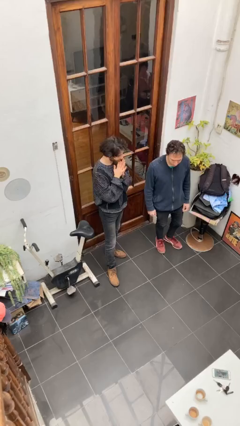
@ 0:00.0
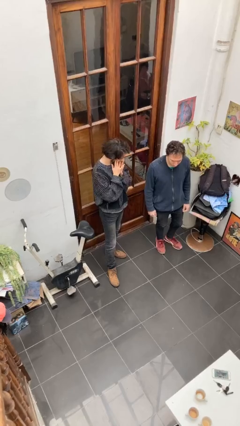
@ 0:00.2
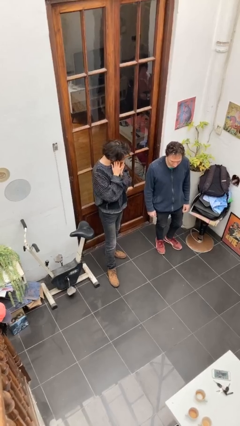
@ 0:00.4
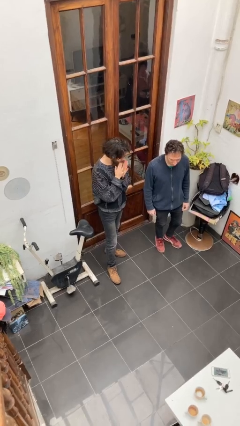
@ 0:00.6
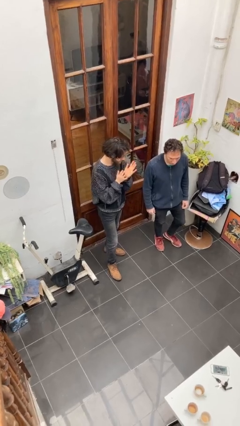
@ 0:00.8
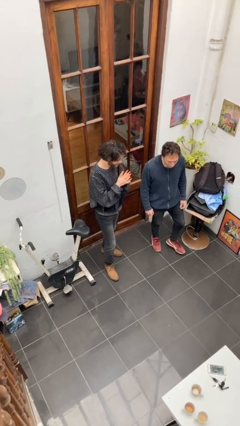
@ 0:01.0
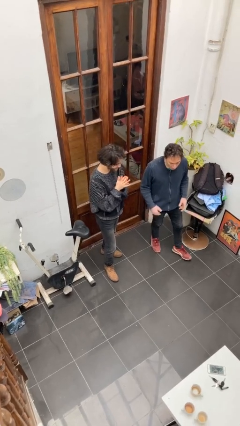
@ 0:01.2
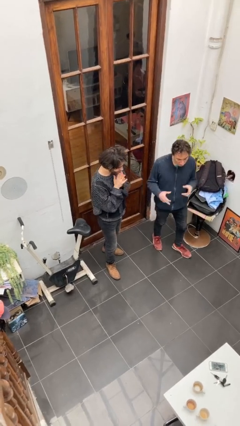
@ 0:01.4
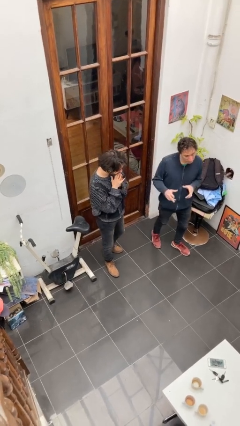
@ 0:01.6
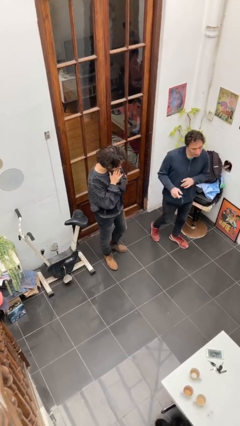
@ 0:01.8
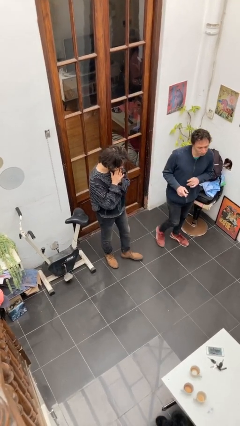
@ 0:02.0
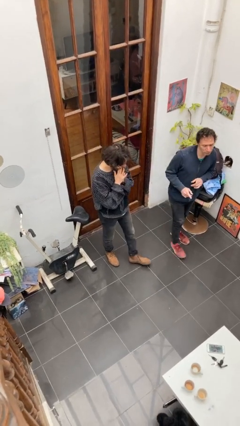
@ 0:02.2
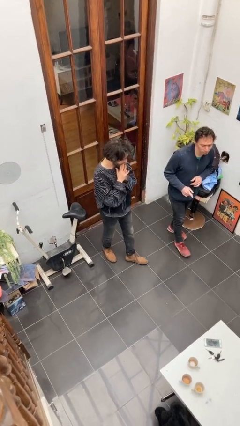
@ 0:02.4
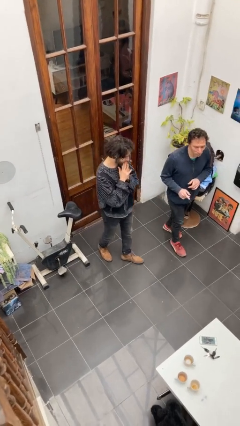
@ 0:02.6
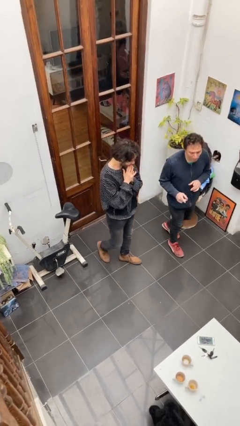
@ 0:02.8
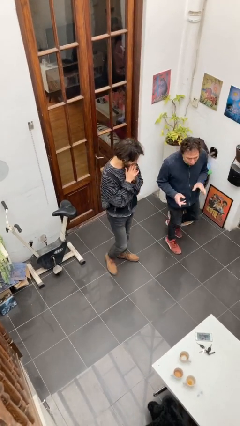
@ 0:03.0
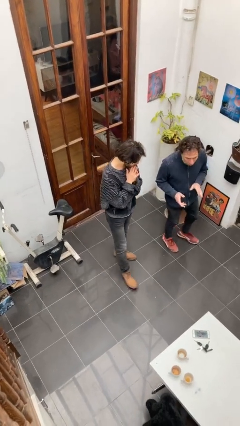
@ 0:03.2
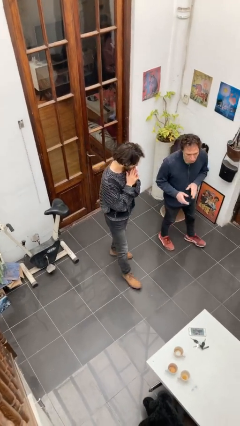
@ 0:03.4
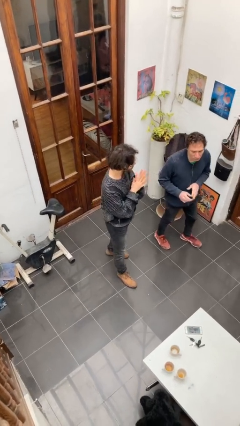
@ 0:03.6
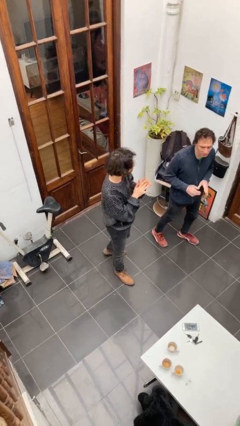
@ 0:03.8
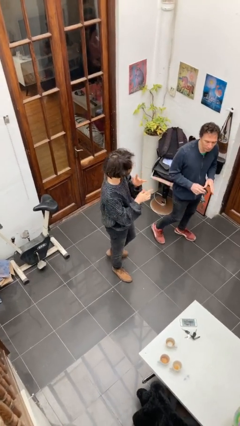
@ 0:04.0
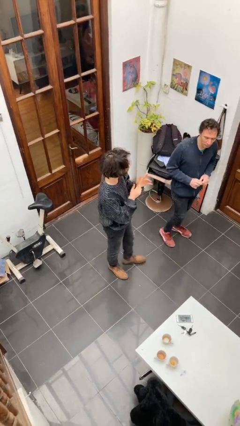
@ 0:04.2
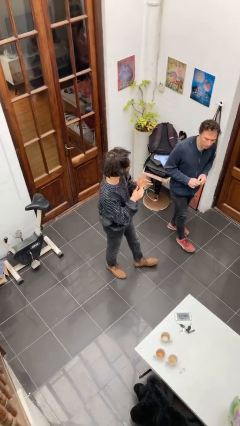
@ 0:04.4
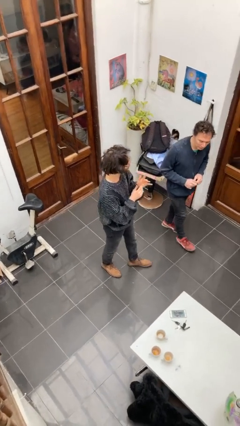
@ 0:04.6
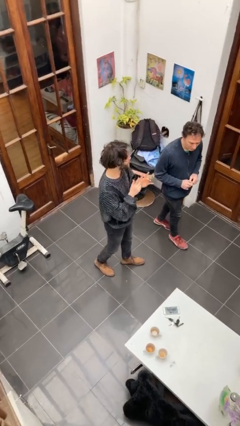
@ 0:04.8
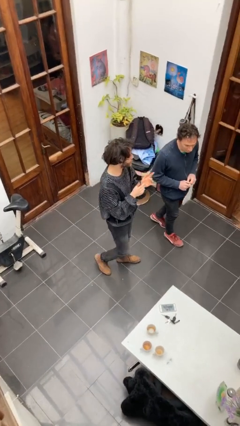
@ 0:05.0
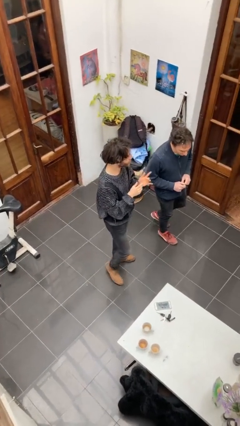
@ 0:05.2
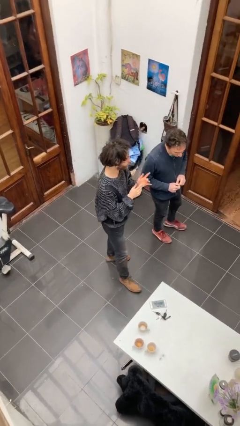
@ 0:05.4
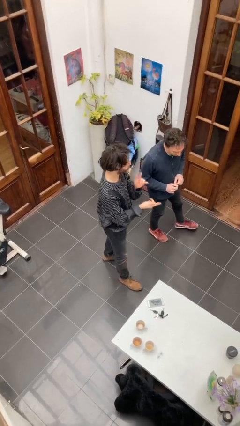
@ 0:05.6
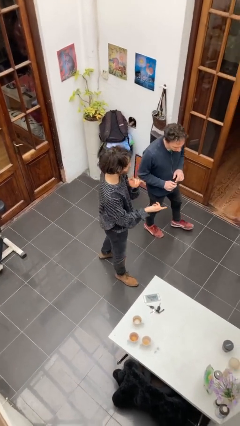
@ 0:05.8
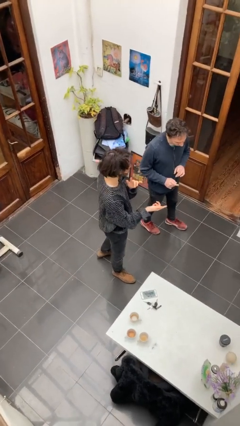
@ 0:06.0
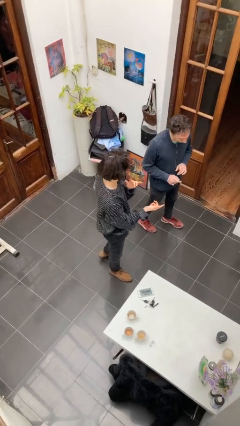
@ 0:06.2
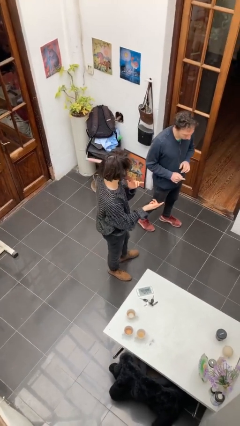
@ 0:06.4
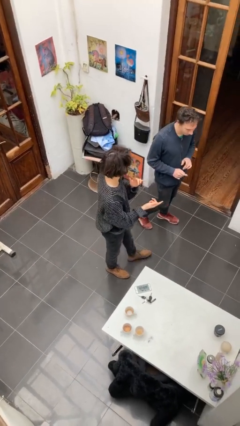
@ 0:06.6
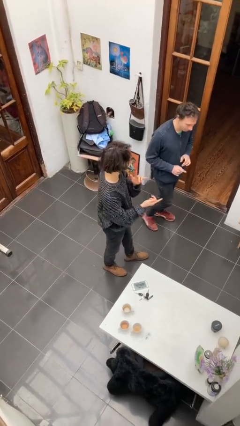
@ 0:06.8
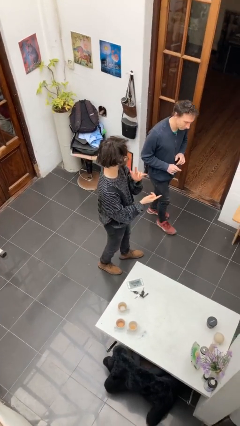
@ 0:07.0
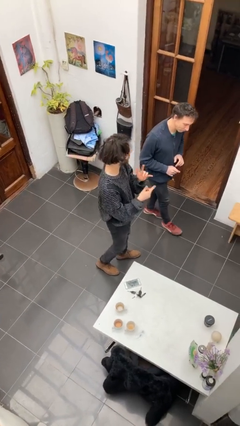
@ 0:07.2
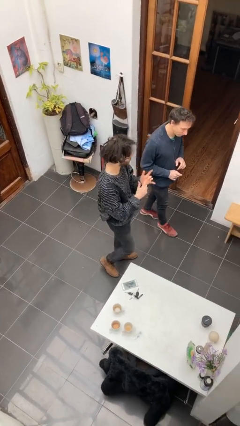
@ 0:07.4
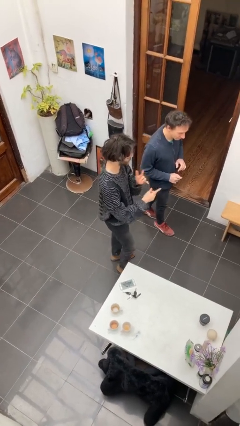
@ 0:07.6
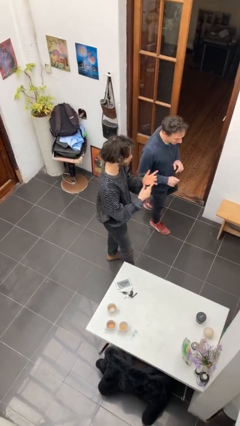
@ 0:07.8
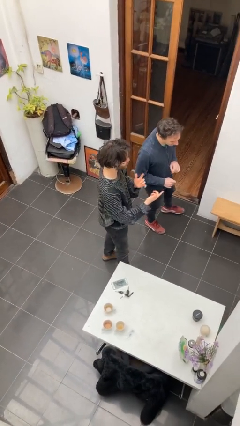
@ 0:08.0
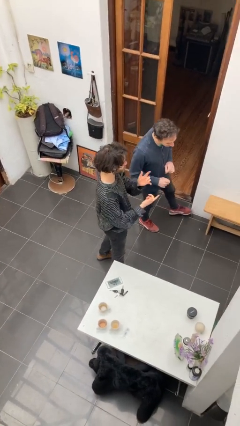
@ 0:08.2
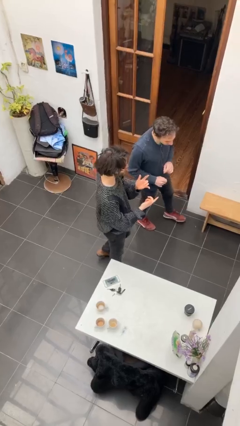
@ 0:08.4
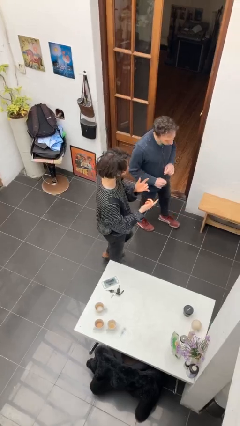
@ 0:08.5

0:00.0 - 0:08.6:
person talks to person

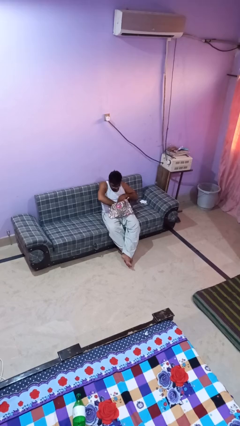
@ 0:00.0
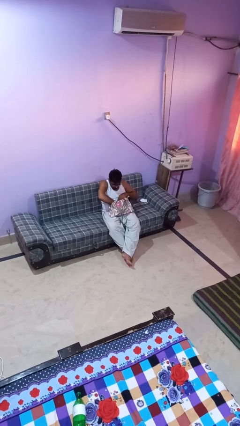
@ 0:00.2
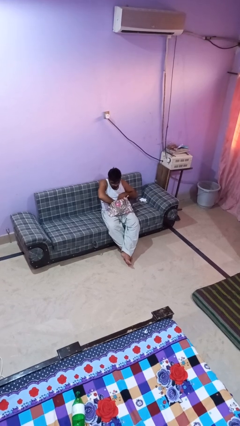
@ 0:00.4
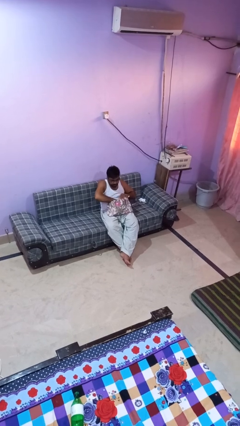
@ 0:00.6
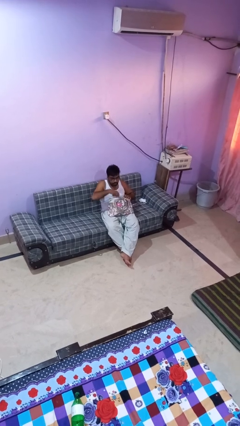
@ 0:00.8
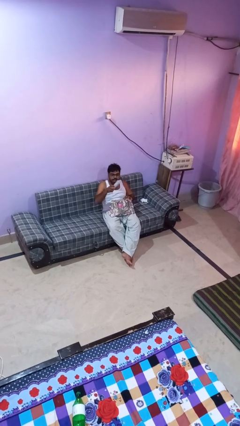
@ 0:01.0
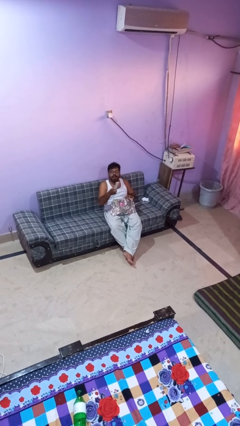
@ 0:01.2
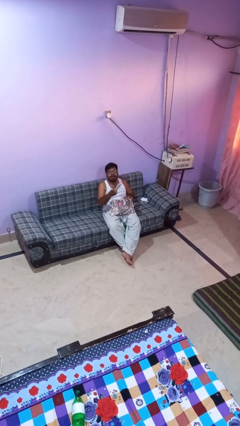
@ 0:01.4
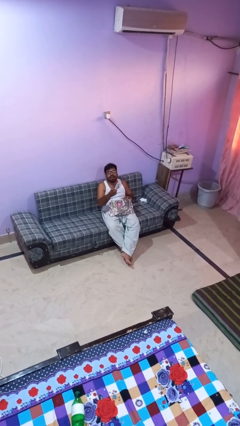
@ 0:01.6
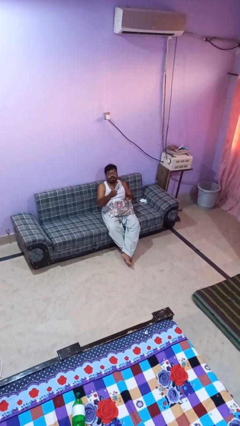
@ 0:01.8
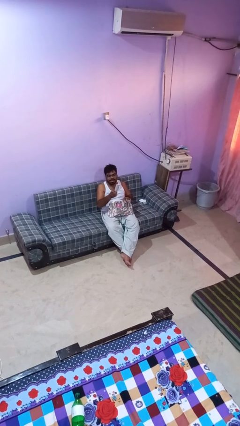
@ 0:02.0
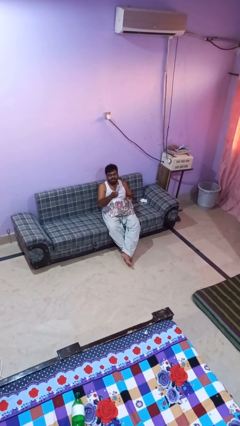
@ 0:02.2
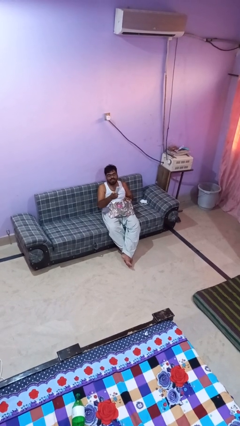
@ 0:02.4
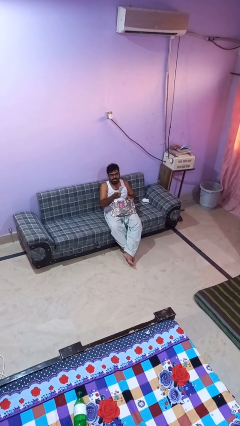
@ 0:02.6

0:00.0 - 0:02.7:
person takes object from purse

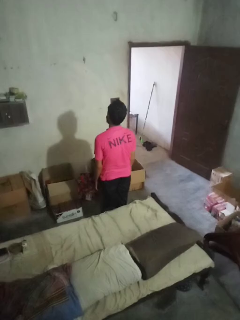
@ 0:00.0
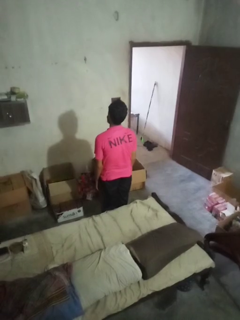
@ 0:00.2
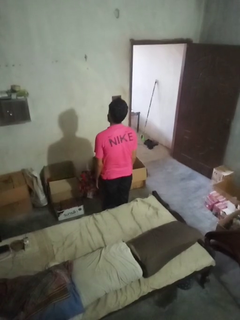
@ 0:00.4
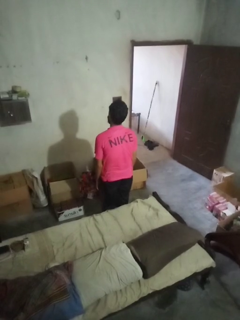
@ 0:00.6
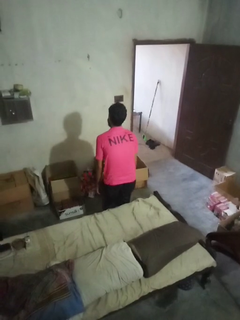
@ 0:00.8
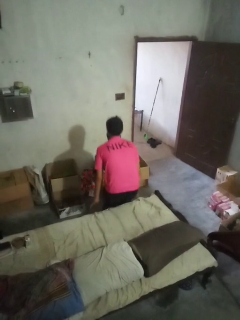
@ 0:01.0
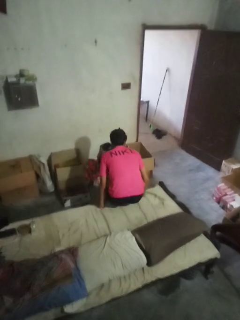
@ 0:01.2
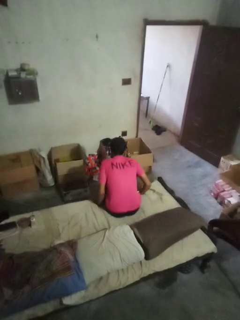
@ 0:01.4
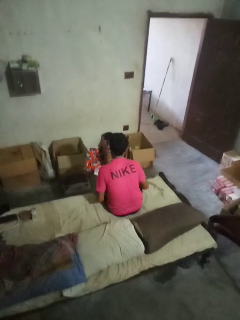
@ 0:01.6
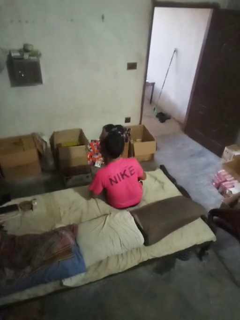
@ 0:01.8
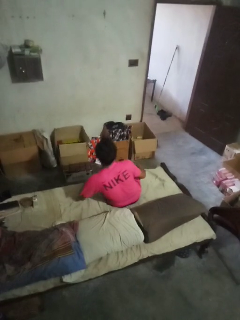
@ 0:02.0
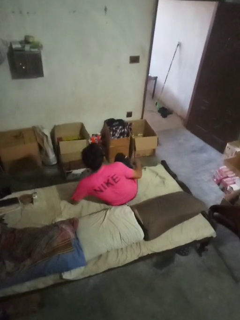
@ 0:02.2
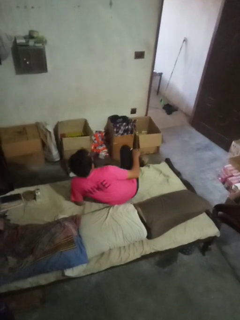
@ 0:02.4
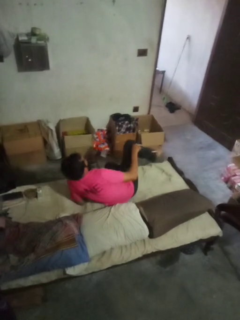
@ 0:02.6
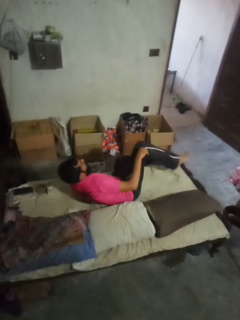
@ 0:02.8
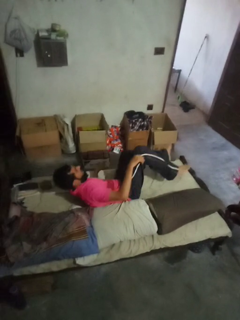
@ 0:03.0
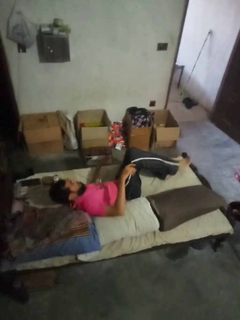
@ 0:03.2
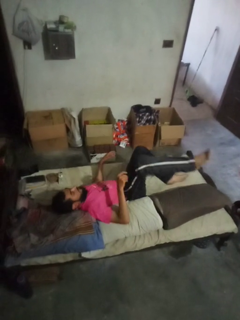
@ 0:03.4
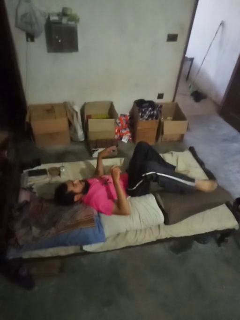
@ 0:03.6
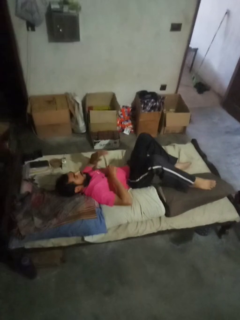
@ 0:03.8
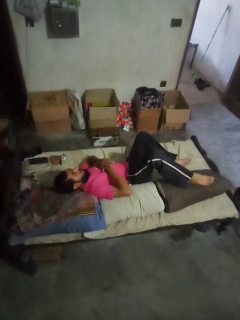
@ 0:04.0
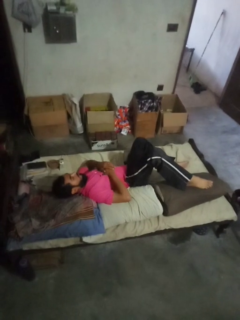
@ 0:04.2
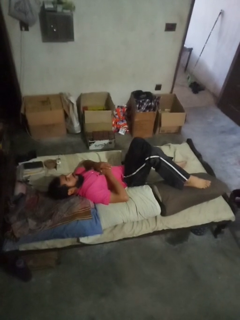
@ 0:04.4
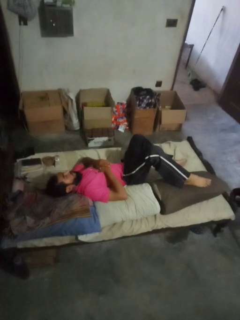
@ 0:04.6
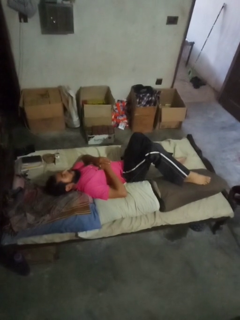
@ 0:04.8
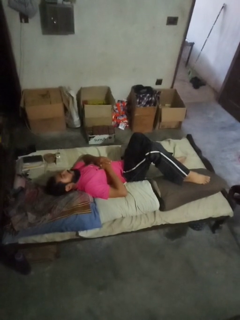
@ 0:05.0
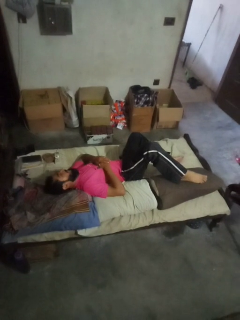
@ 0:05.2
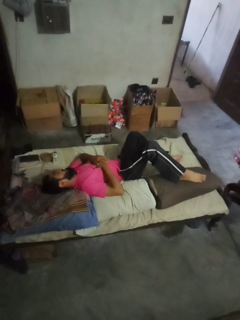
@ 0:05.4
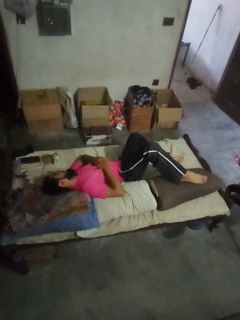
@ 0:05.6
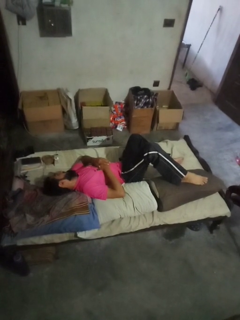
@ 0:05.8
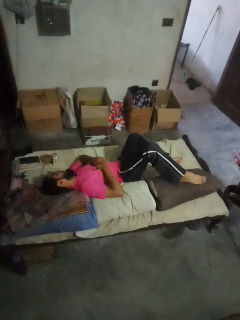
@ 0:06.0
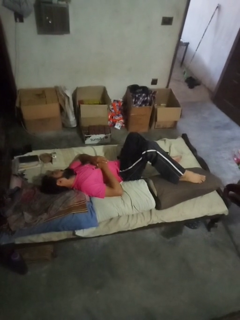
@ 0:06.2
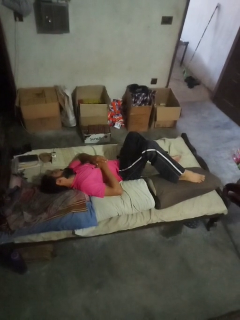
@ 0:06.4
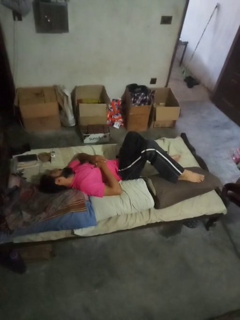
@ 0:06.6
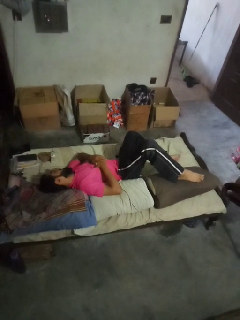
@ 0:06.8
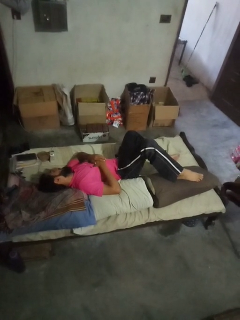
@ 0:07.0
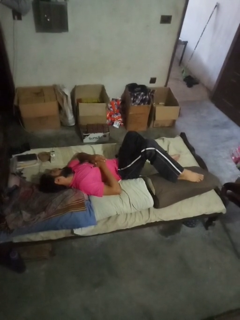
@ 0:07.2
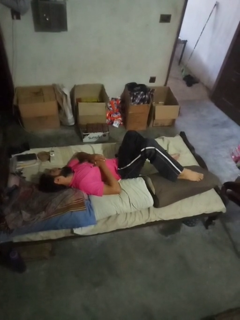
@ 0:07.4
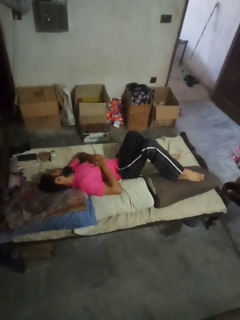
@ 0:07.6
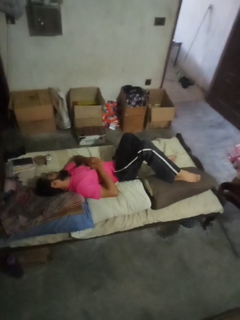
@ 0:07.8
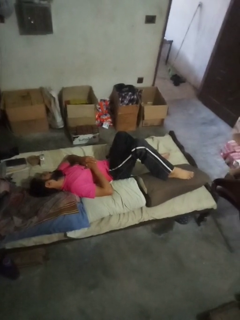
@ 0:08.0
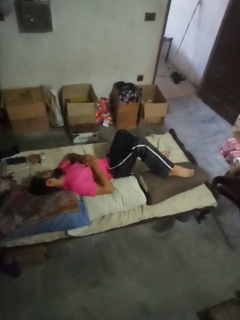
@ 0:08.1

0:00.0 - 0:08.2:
person lies down on couch

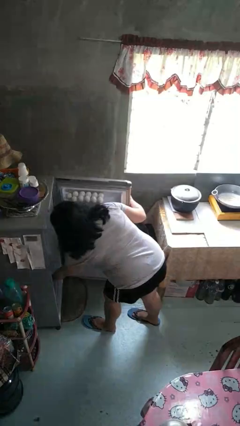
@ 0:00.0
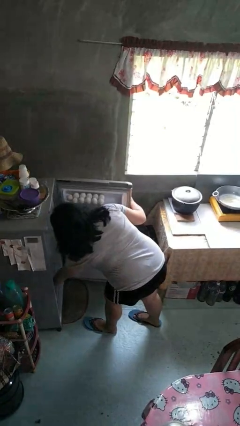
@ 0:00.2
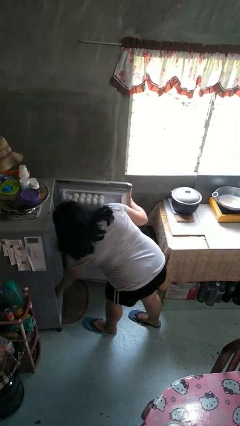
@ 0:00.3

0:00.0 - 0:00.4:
person puts object into refrigerator
